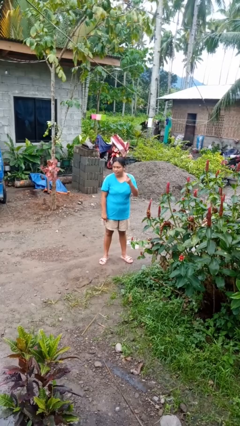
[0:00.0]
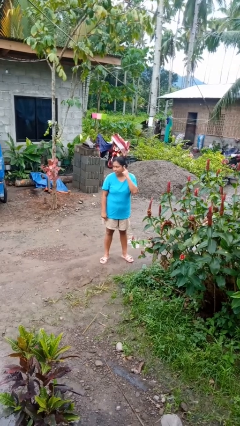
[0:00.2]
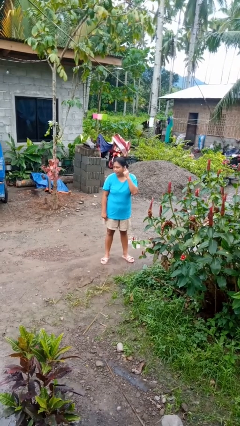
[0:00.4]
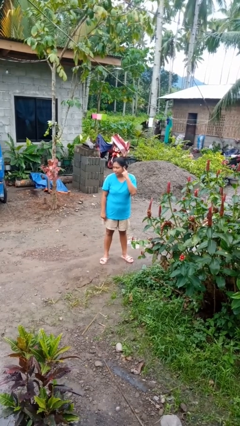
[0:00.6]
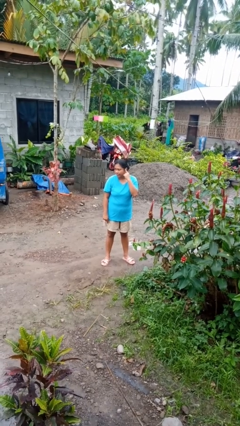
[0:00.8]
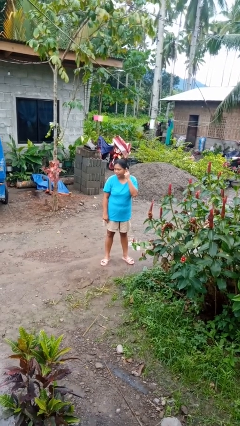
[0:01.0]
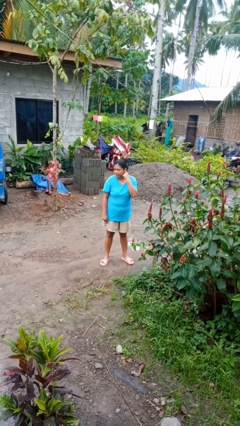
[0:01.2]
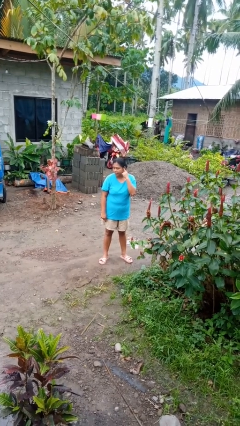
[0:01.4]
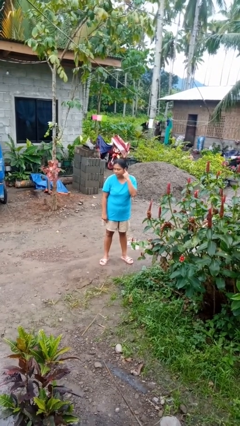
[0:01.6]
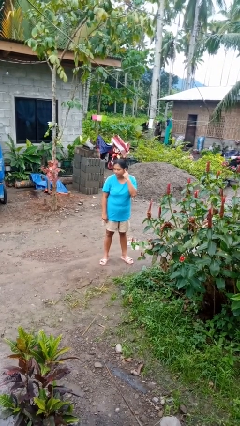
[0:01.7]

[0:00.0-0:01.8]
person gestures listen closely

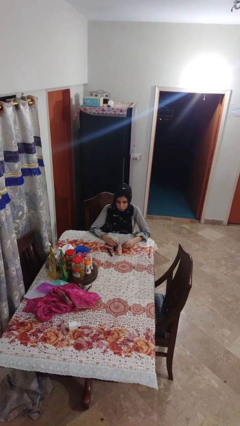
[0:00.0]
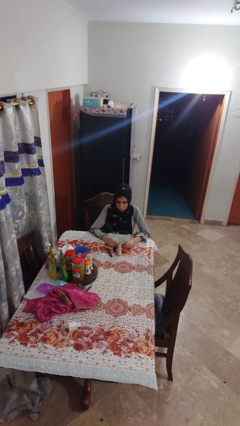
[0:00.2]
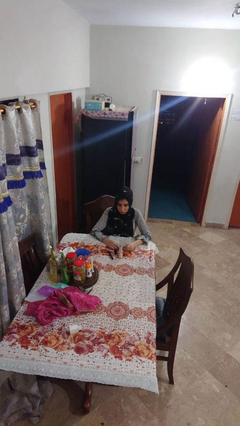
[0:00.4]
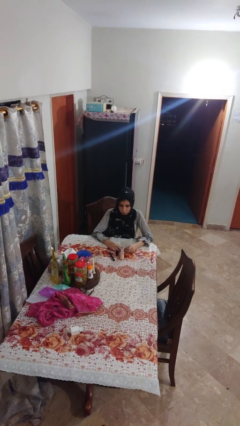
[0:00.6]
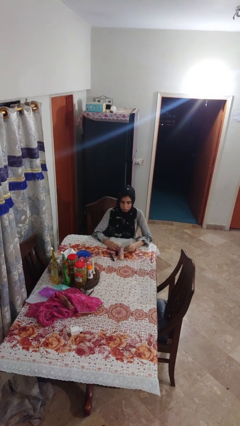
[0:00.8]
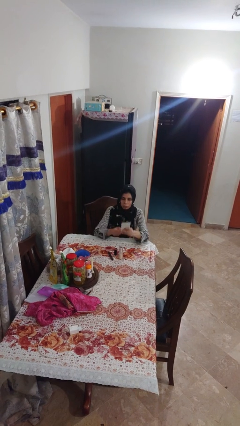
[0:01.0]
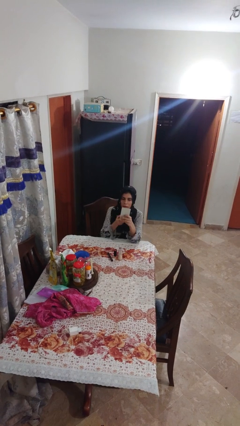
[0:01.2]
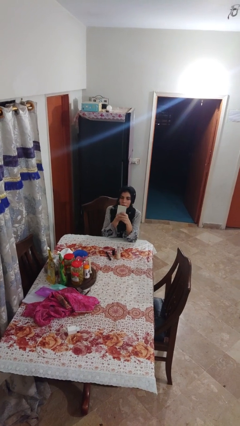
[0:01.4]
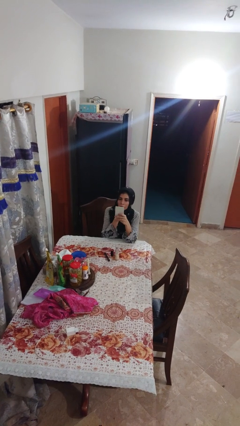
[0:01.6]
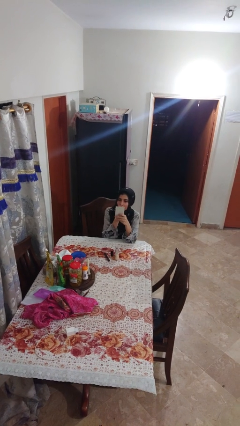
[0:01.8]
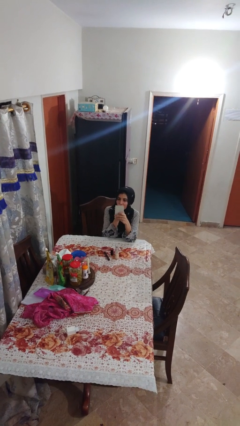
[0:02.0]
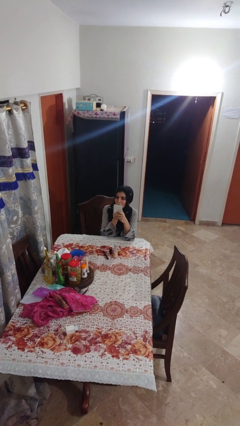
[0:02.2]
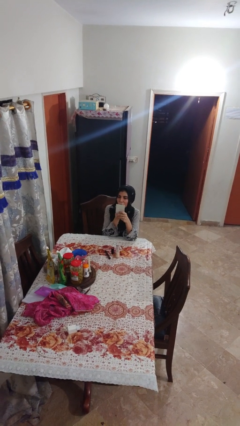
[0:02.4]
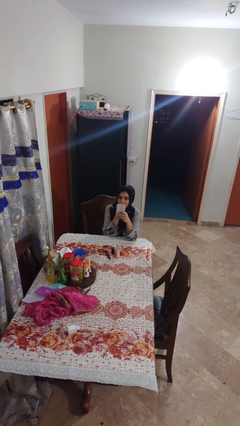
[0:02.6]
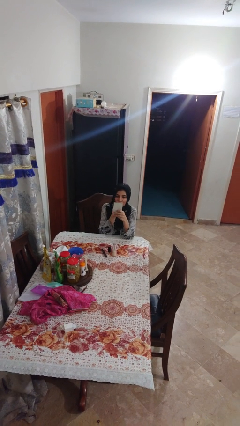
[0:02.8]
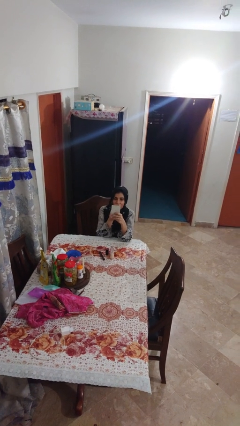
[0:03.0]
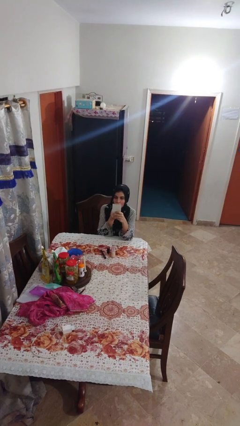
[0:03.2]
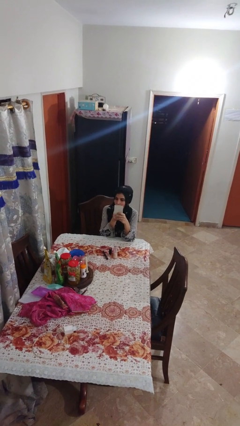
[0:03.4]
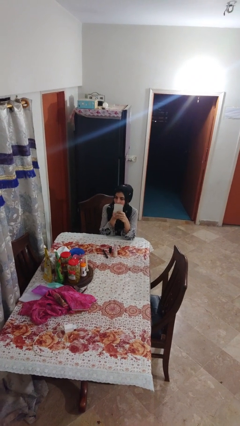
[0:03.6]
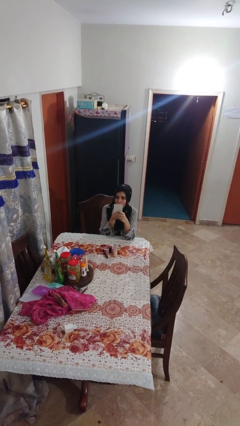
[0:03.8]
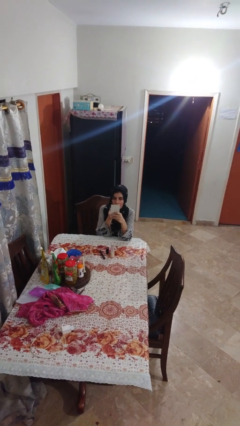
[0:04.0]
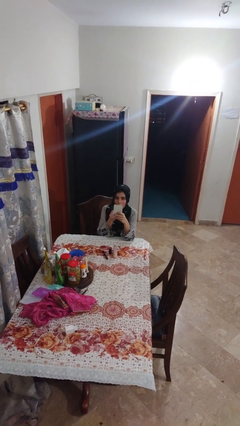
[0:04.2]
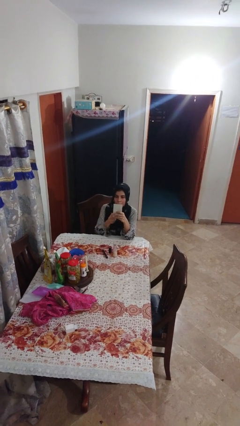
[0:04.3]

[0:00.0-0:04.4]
person applies lip makeup

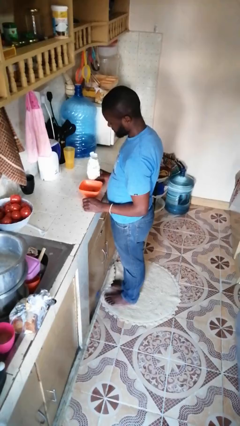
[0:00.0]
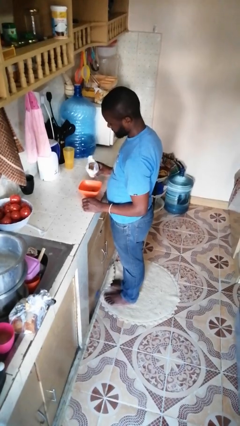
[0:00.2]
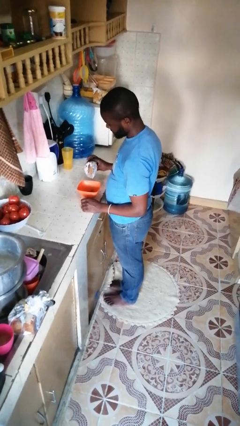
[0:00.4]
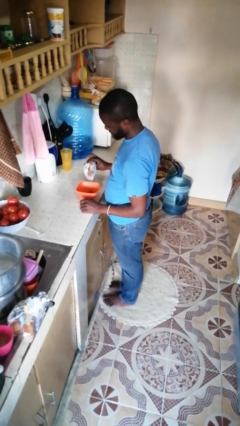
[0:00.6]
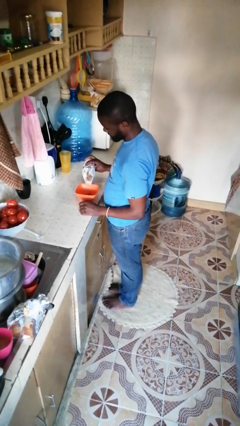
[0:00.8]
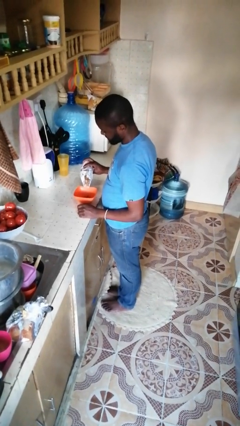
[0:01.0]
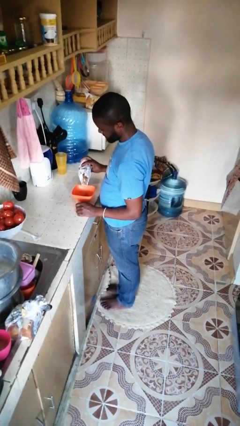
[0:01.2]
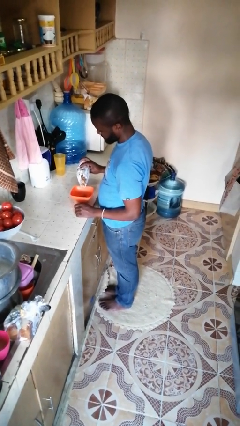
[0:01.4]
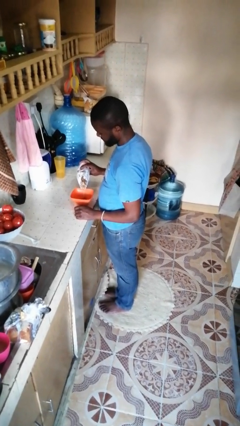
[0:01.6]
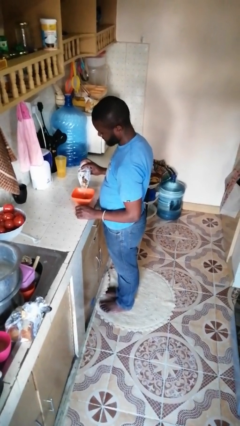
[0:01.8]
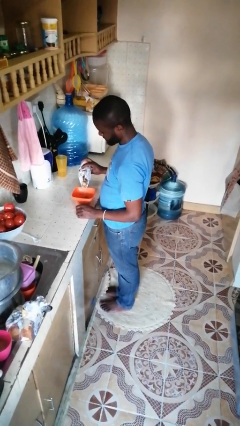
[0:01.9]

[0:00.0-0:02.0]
person pours into bowl

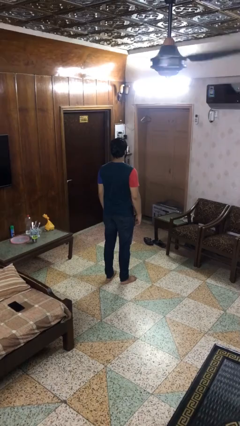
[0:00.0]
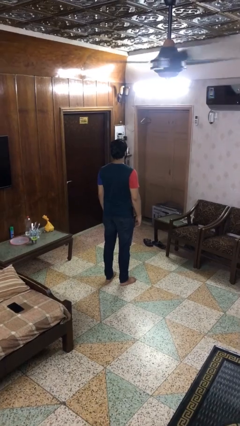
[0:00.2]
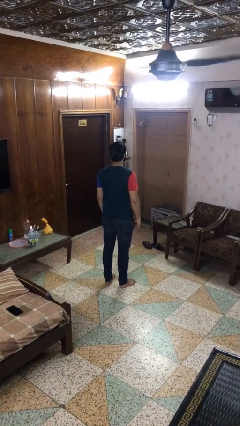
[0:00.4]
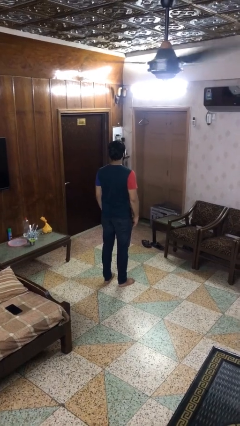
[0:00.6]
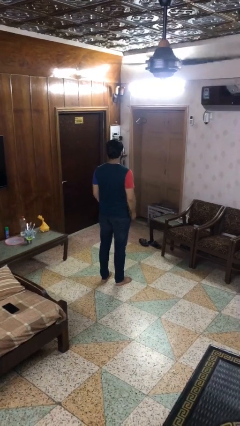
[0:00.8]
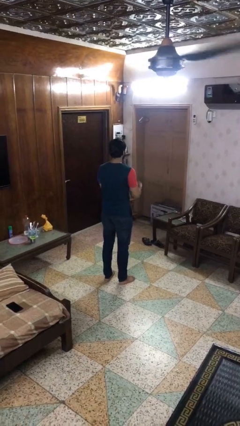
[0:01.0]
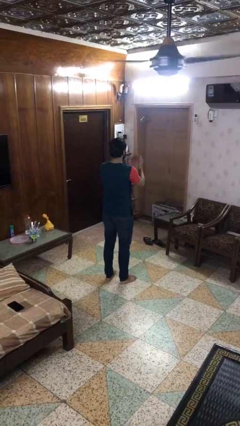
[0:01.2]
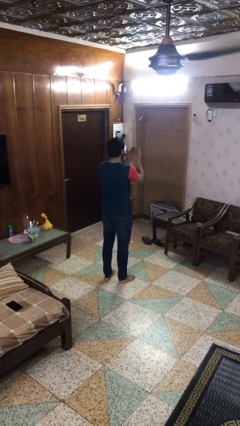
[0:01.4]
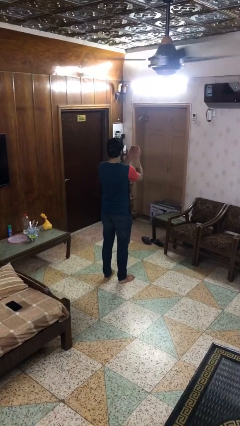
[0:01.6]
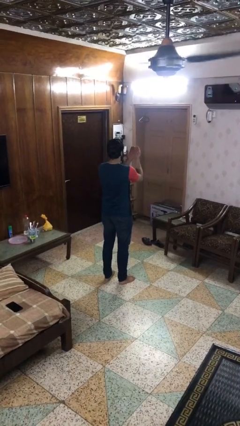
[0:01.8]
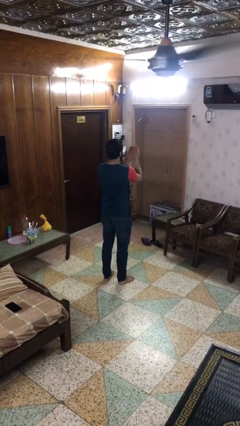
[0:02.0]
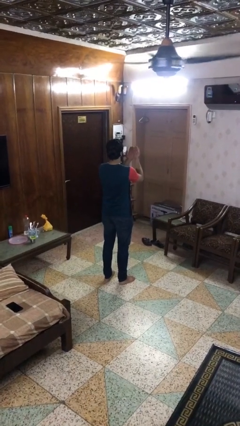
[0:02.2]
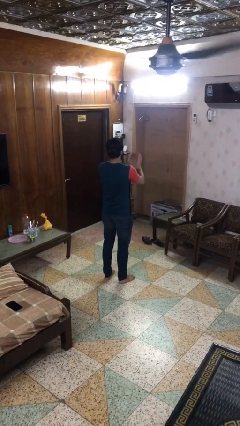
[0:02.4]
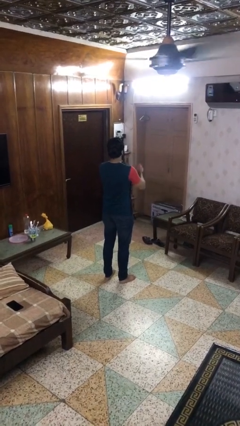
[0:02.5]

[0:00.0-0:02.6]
person prays

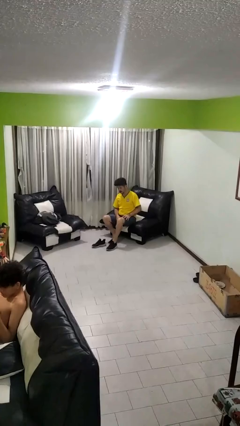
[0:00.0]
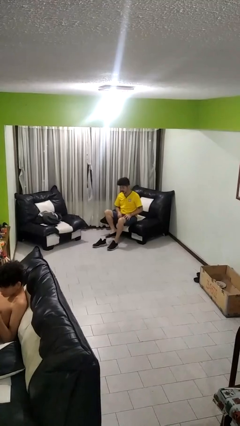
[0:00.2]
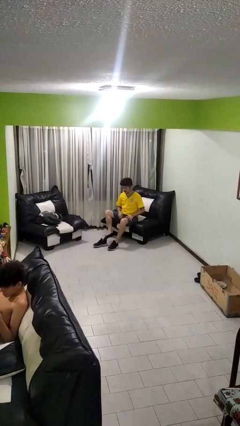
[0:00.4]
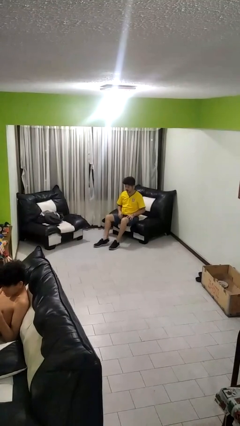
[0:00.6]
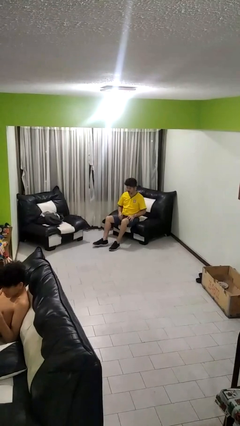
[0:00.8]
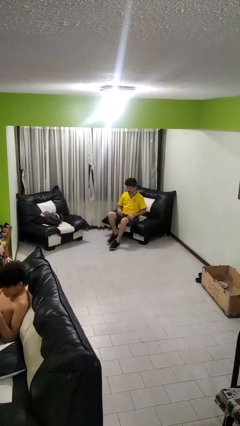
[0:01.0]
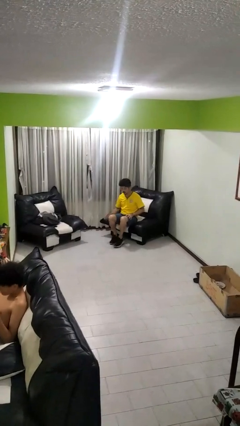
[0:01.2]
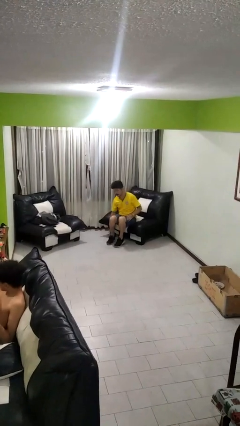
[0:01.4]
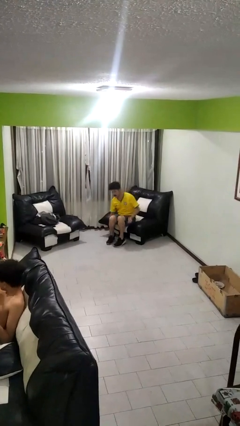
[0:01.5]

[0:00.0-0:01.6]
person puts on shoes

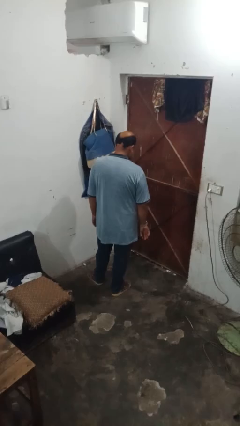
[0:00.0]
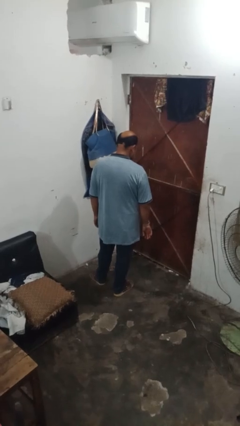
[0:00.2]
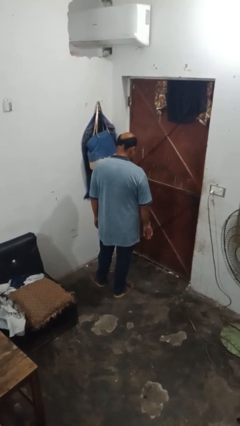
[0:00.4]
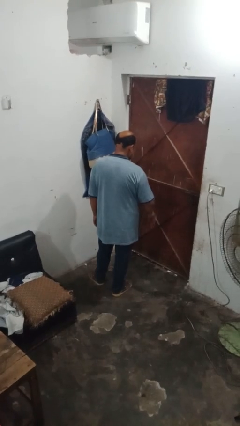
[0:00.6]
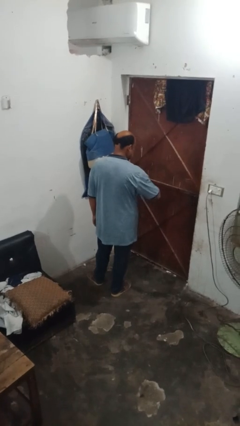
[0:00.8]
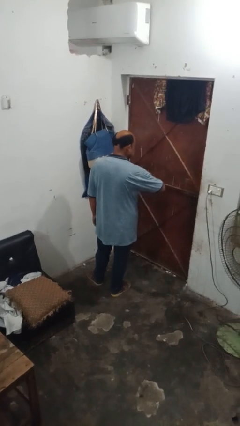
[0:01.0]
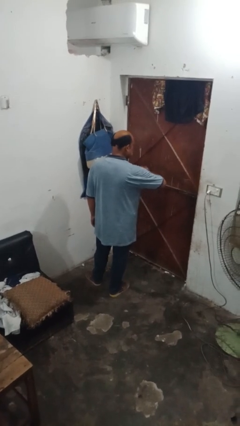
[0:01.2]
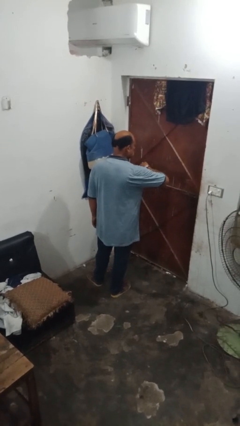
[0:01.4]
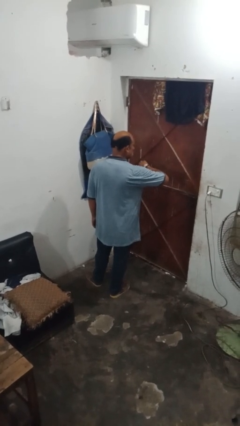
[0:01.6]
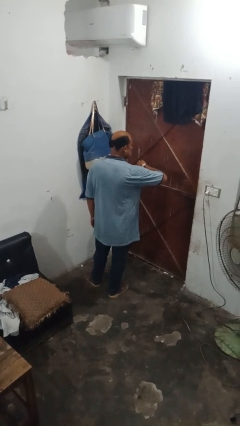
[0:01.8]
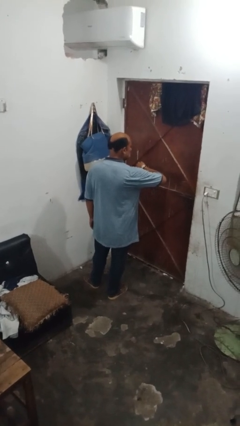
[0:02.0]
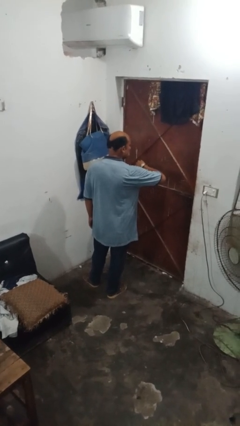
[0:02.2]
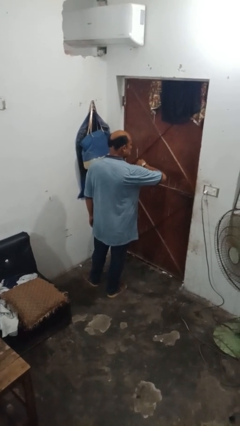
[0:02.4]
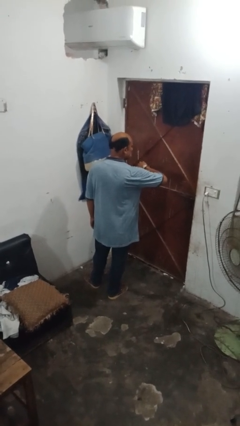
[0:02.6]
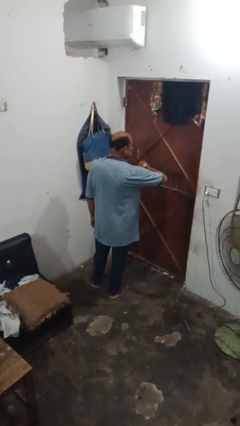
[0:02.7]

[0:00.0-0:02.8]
person looks at wristwatch

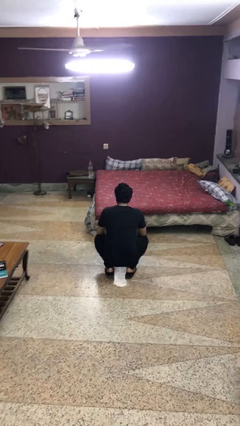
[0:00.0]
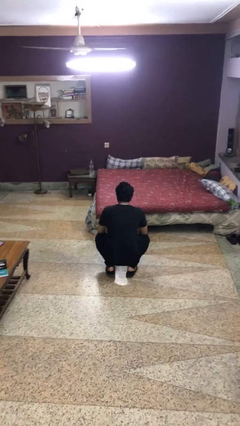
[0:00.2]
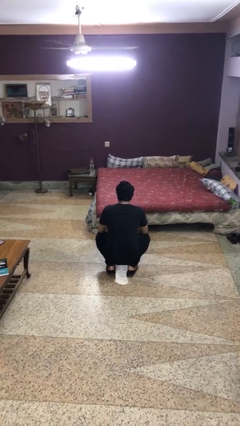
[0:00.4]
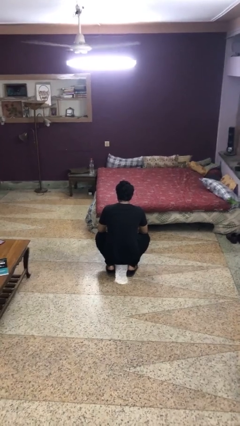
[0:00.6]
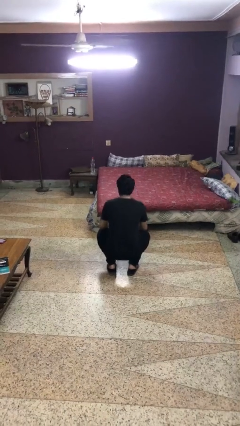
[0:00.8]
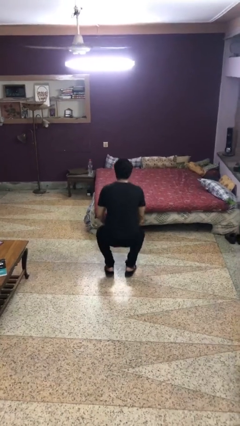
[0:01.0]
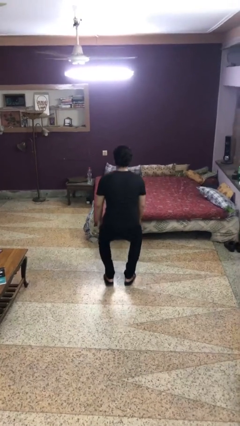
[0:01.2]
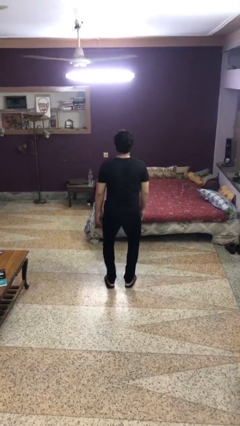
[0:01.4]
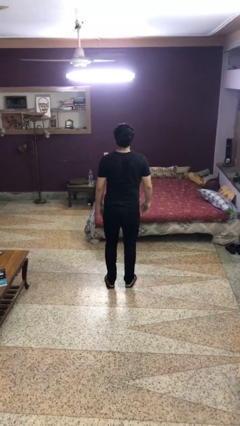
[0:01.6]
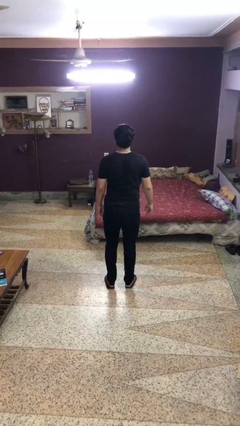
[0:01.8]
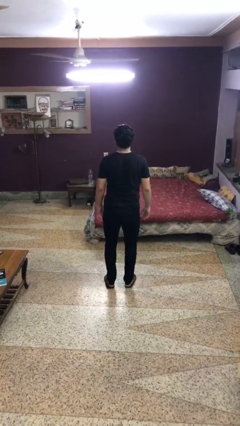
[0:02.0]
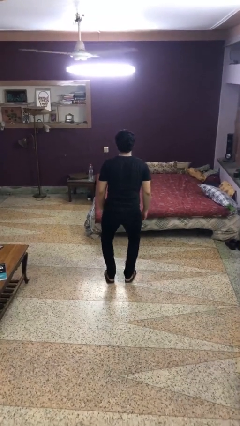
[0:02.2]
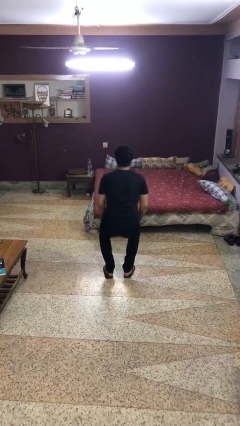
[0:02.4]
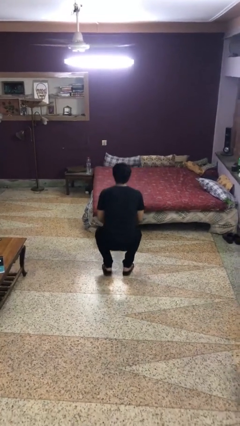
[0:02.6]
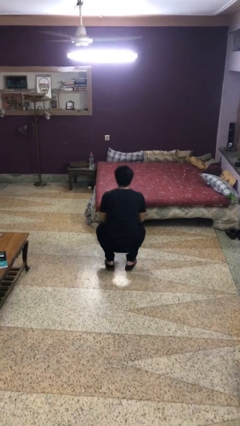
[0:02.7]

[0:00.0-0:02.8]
person exercises with situp
